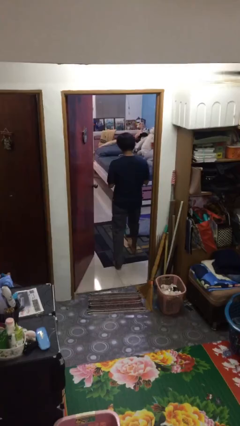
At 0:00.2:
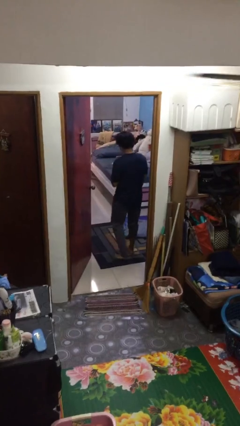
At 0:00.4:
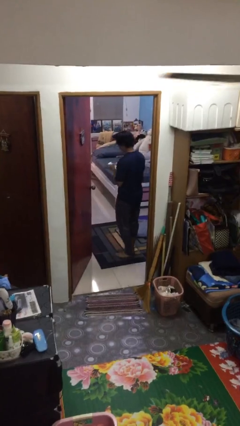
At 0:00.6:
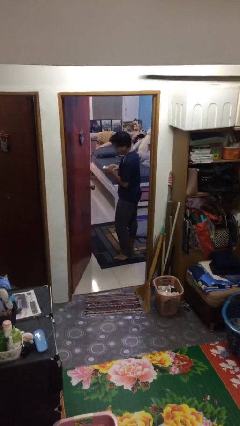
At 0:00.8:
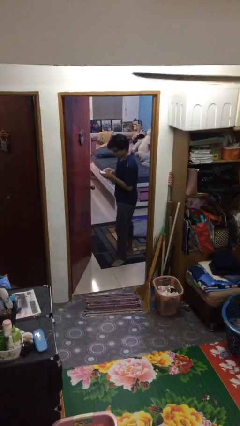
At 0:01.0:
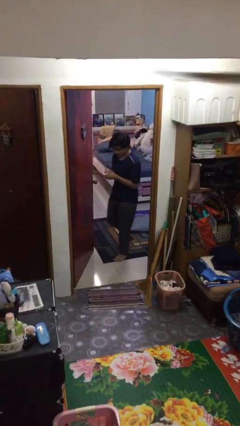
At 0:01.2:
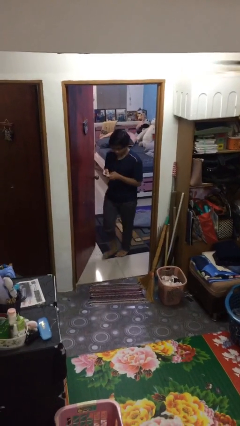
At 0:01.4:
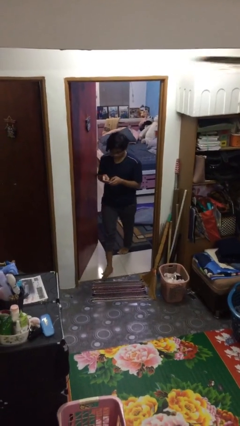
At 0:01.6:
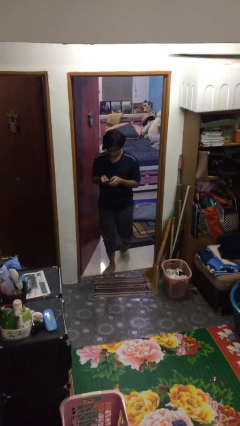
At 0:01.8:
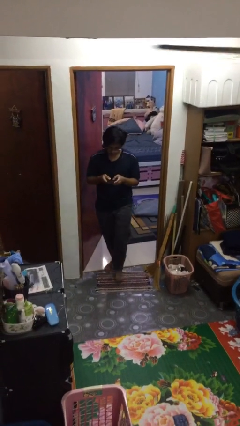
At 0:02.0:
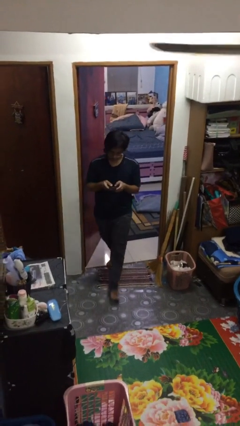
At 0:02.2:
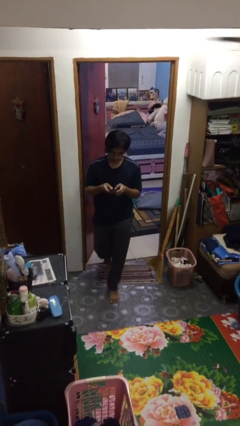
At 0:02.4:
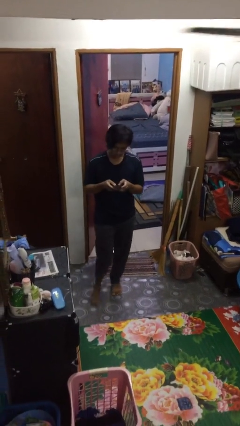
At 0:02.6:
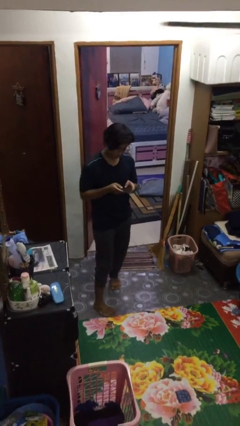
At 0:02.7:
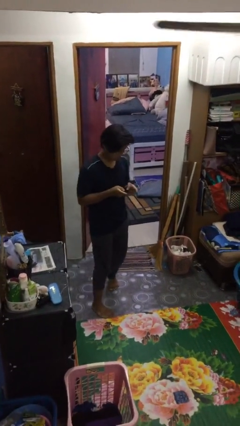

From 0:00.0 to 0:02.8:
person enters scene through structure

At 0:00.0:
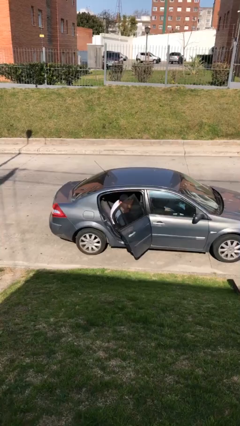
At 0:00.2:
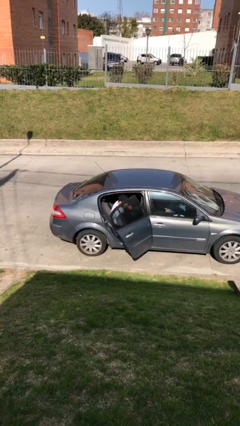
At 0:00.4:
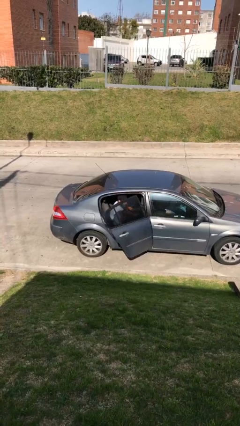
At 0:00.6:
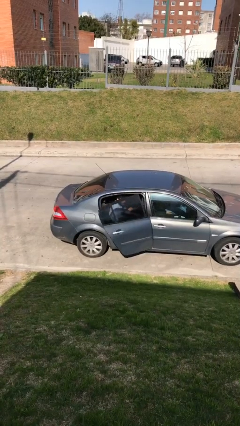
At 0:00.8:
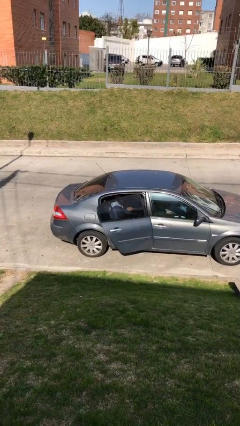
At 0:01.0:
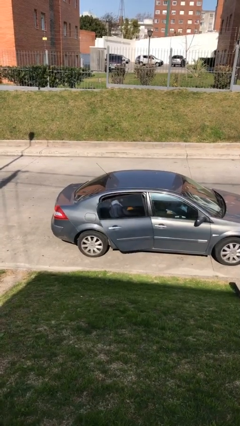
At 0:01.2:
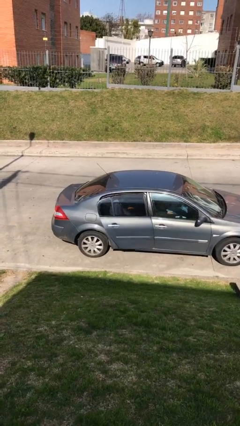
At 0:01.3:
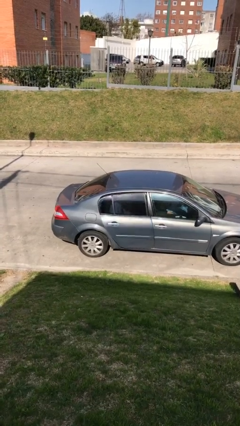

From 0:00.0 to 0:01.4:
person closes car door

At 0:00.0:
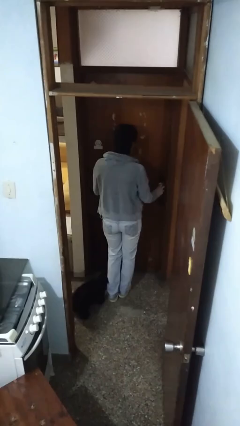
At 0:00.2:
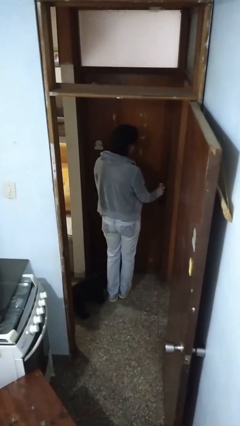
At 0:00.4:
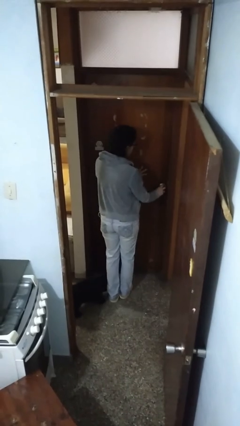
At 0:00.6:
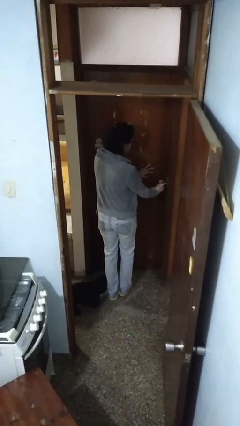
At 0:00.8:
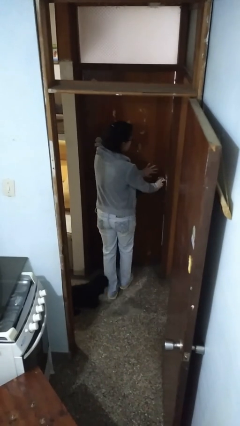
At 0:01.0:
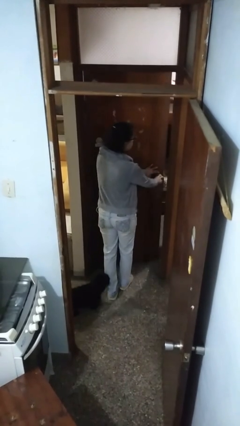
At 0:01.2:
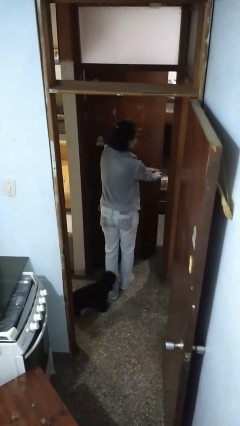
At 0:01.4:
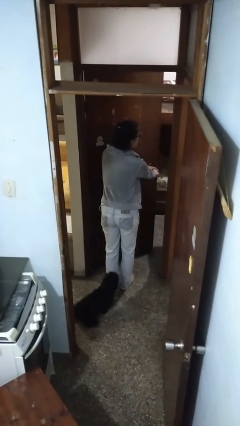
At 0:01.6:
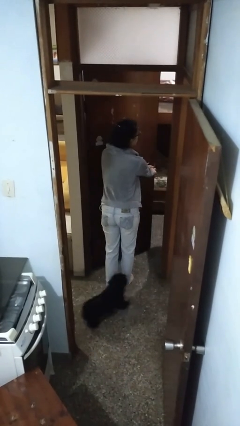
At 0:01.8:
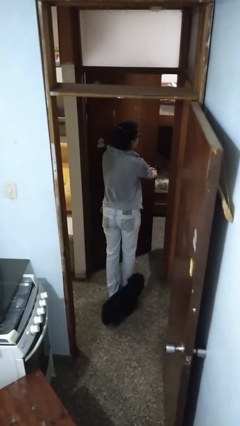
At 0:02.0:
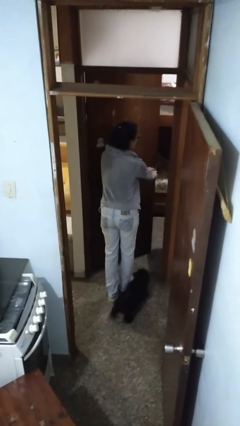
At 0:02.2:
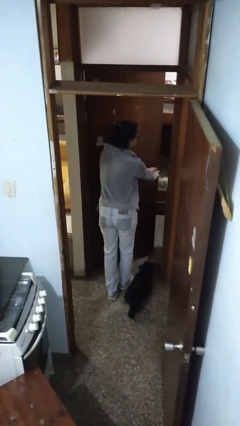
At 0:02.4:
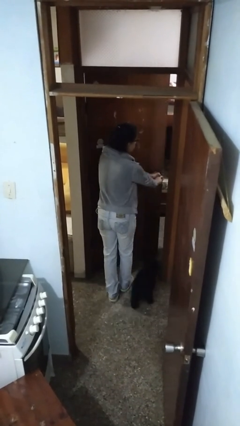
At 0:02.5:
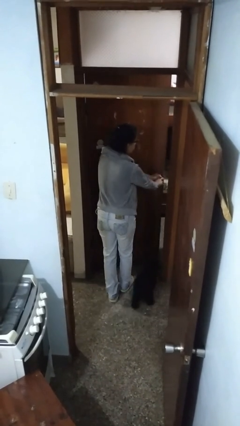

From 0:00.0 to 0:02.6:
person opens facility door

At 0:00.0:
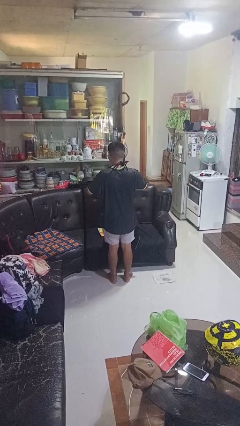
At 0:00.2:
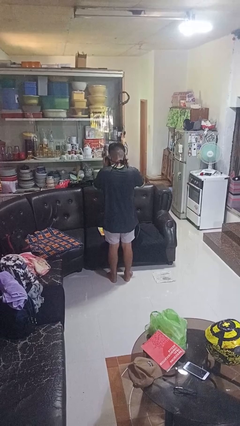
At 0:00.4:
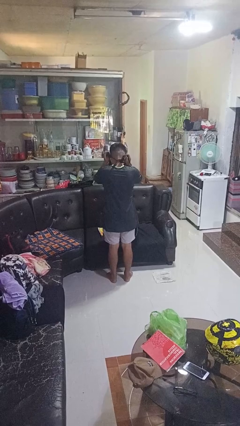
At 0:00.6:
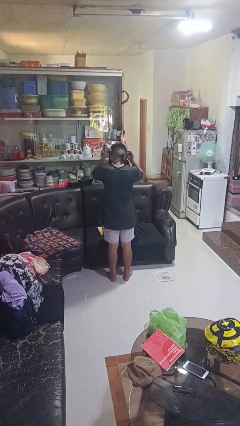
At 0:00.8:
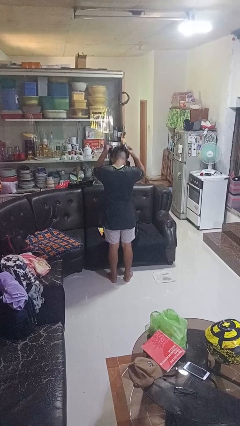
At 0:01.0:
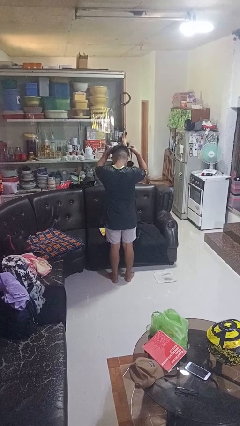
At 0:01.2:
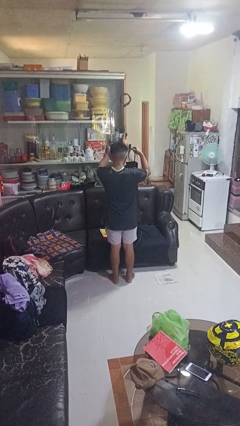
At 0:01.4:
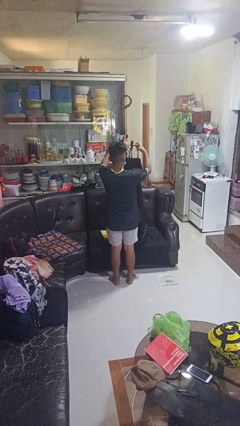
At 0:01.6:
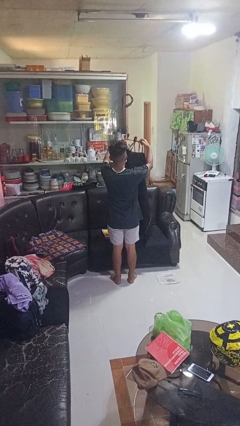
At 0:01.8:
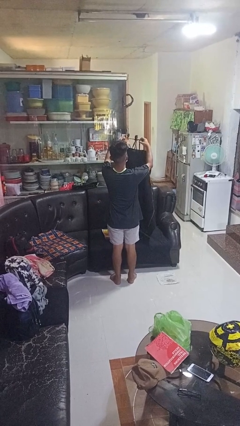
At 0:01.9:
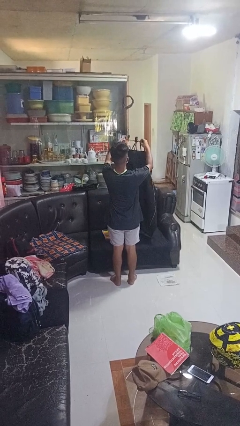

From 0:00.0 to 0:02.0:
person takes off apron

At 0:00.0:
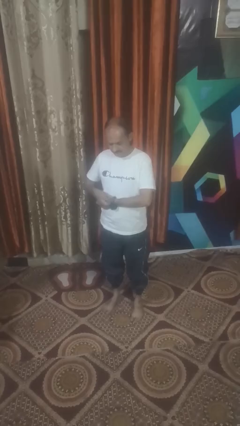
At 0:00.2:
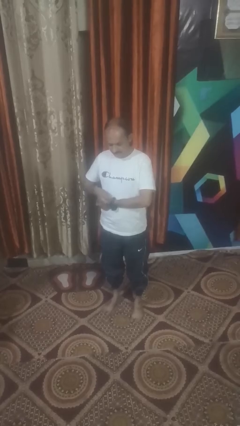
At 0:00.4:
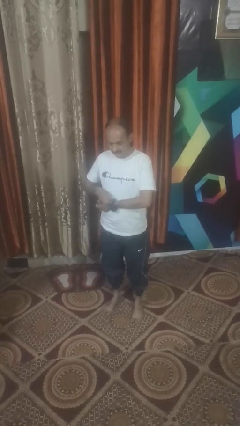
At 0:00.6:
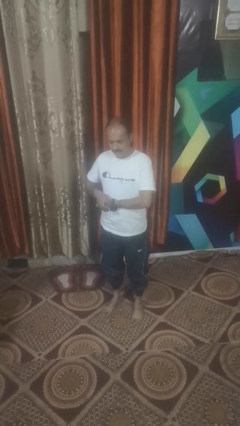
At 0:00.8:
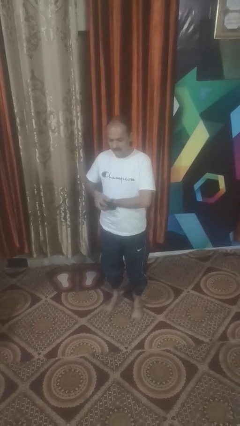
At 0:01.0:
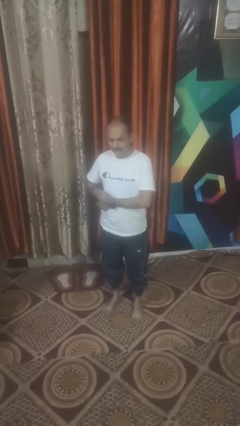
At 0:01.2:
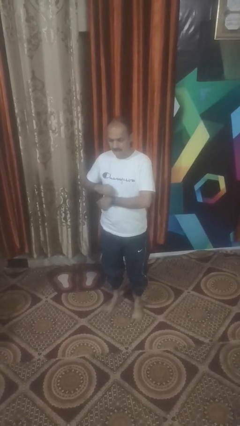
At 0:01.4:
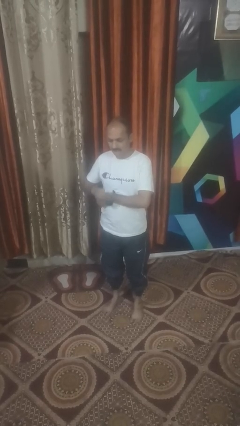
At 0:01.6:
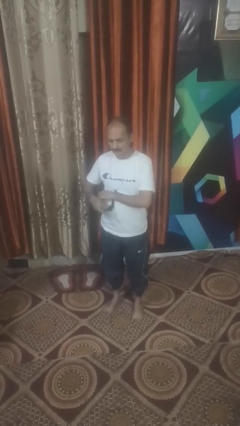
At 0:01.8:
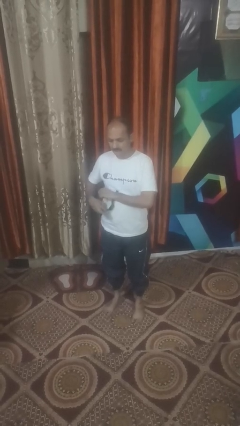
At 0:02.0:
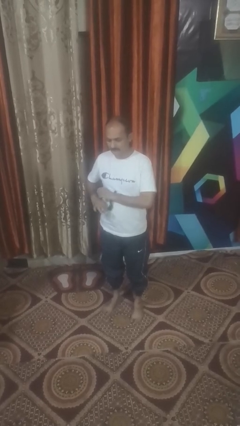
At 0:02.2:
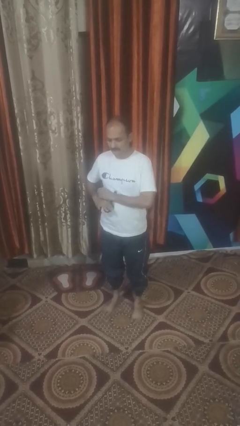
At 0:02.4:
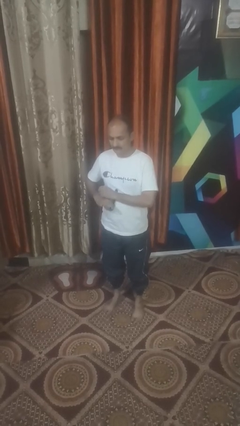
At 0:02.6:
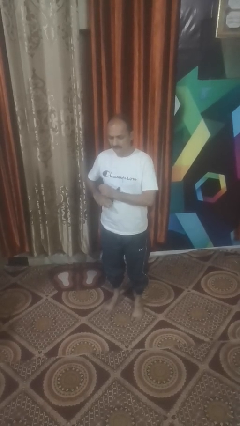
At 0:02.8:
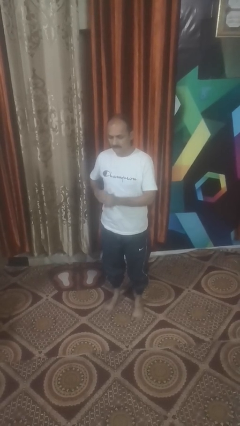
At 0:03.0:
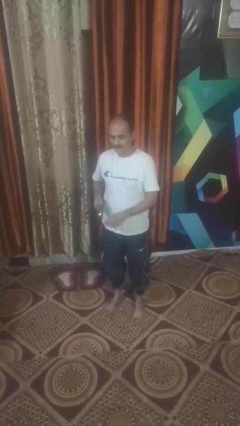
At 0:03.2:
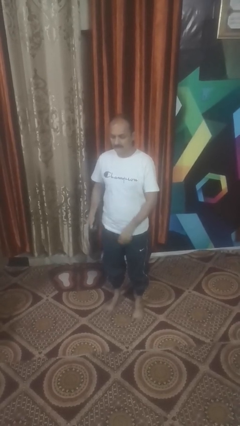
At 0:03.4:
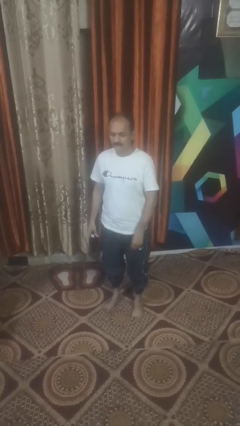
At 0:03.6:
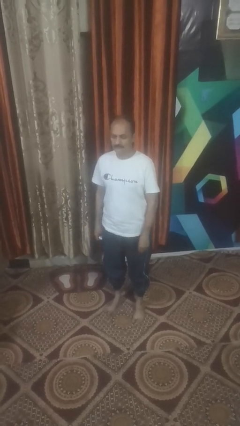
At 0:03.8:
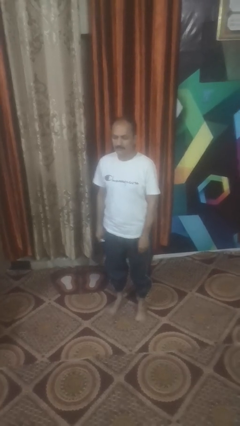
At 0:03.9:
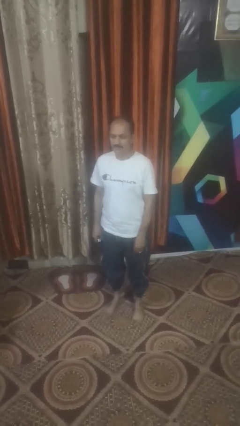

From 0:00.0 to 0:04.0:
person takes off wristwatch

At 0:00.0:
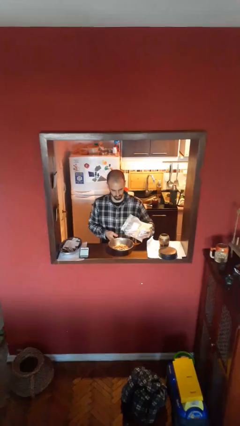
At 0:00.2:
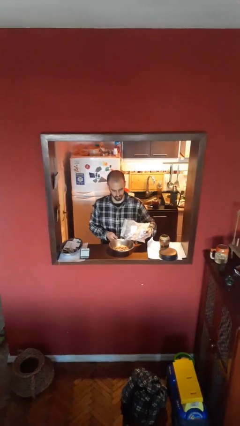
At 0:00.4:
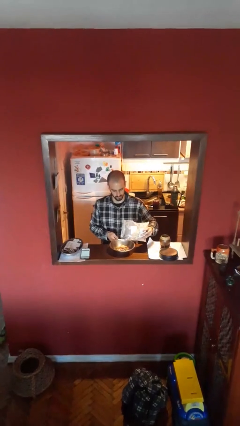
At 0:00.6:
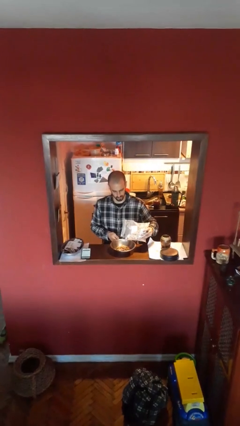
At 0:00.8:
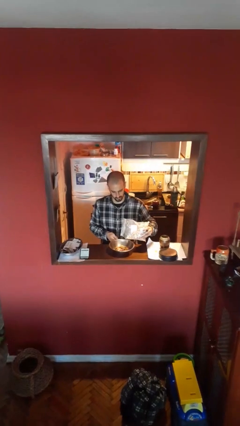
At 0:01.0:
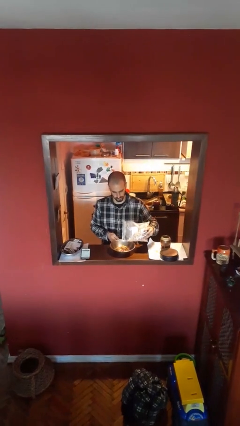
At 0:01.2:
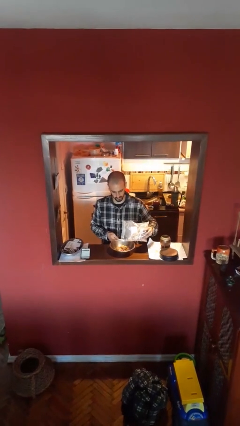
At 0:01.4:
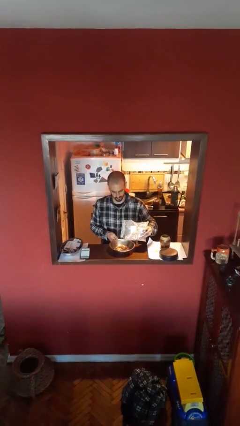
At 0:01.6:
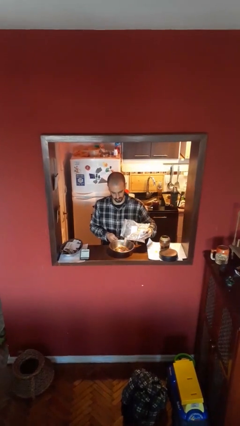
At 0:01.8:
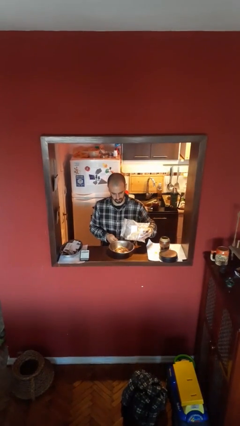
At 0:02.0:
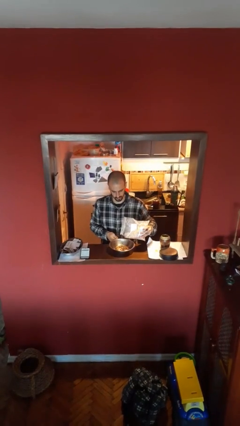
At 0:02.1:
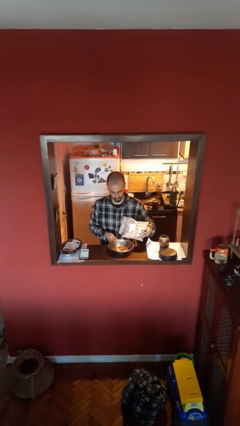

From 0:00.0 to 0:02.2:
person pours into bowl

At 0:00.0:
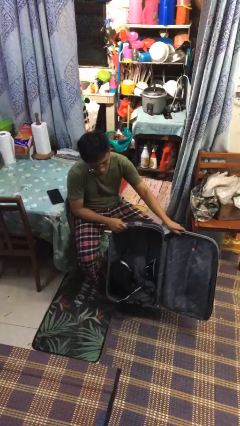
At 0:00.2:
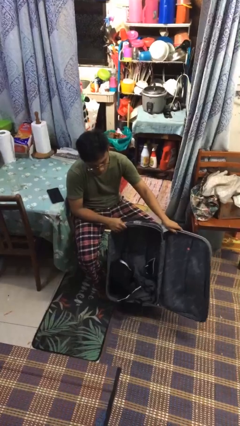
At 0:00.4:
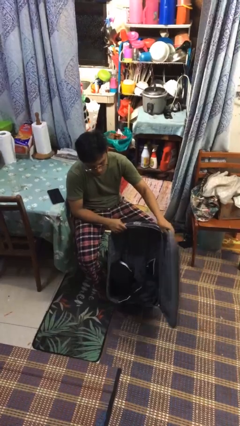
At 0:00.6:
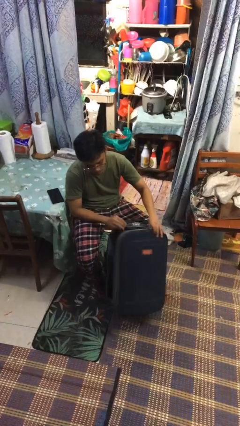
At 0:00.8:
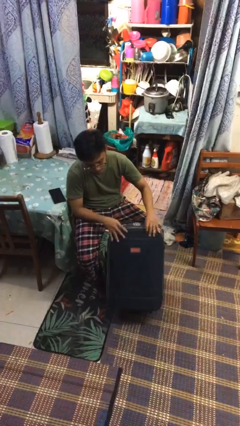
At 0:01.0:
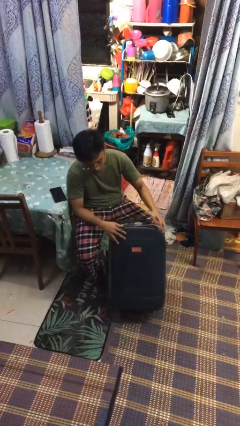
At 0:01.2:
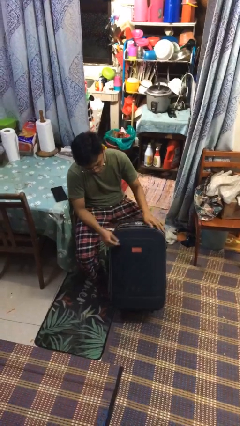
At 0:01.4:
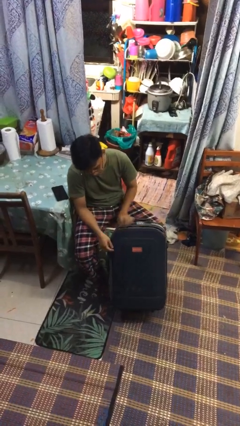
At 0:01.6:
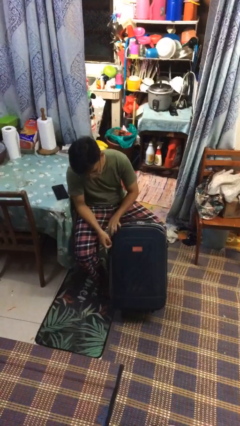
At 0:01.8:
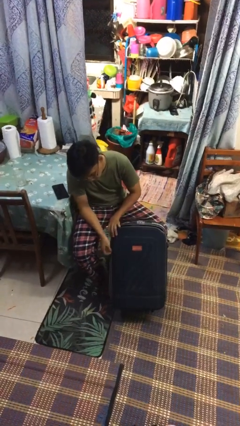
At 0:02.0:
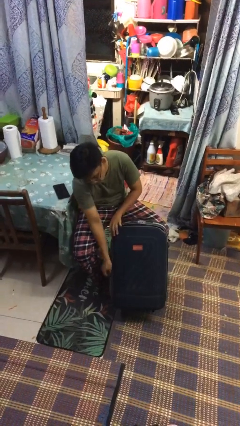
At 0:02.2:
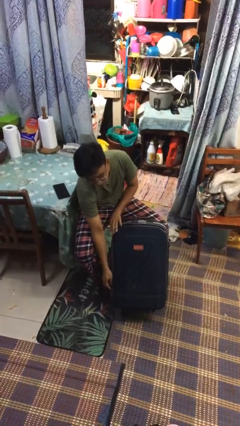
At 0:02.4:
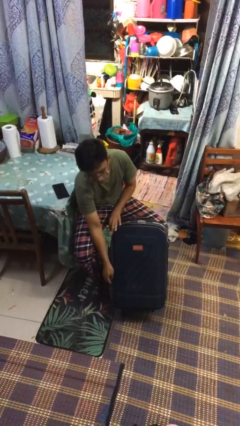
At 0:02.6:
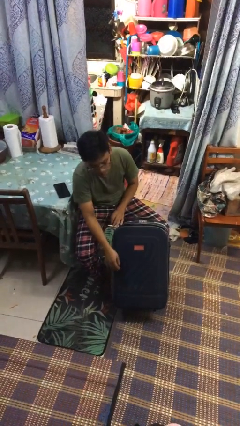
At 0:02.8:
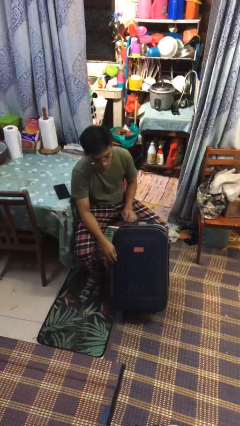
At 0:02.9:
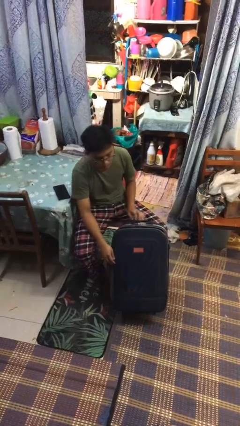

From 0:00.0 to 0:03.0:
person closes suitcase
